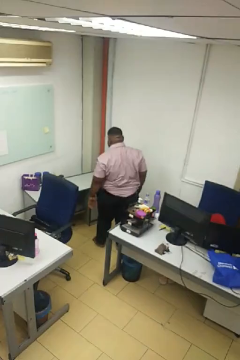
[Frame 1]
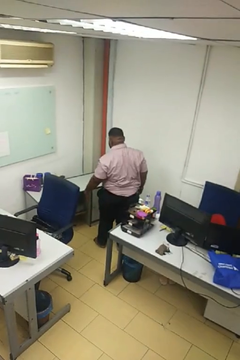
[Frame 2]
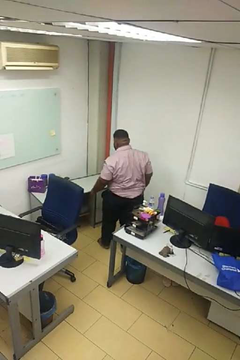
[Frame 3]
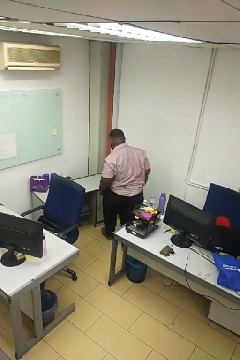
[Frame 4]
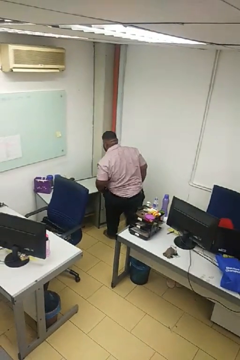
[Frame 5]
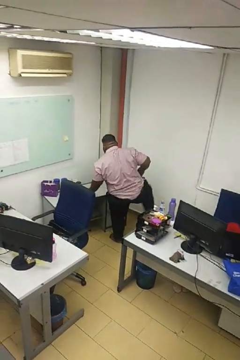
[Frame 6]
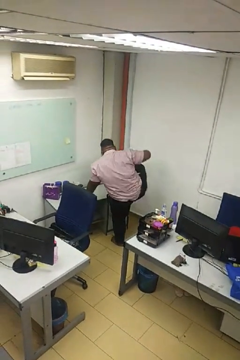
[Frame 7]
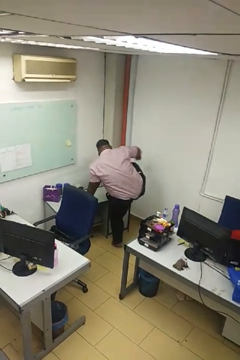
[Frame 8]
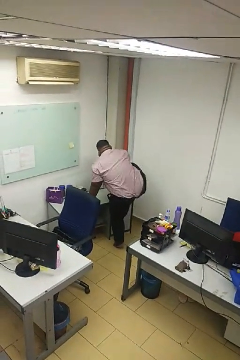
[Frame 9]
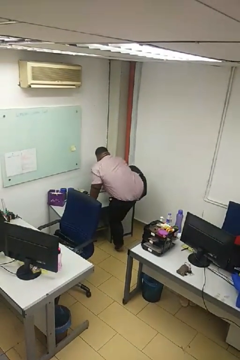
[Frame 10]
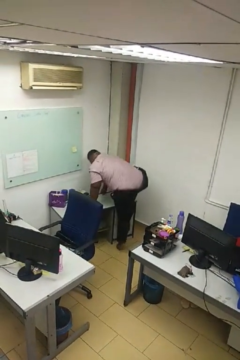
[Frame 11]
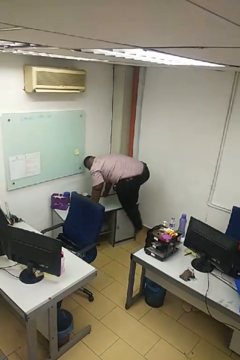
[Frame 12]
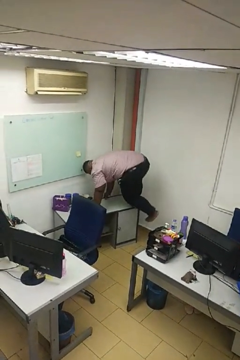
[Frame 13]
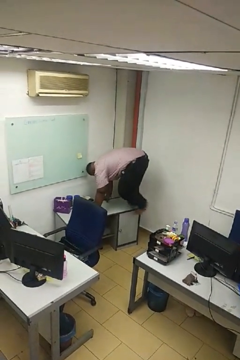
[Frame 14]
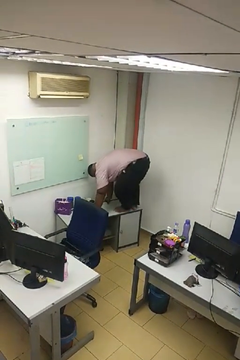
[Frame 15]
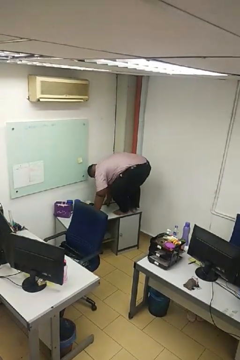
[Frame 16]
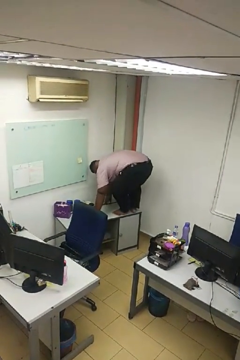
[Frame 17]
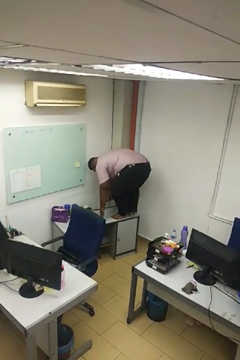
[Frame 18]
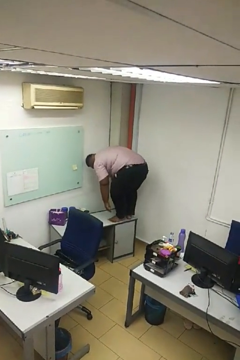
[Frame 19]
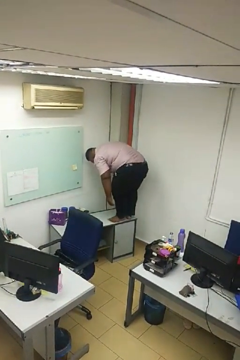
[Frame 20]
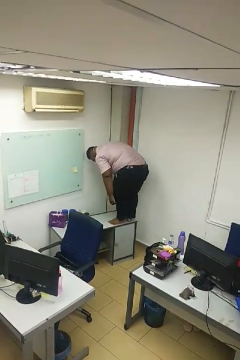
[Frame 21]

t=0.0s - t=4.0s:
person climbs on table

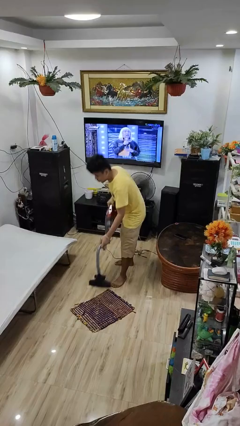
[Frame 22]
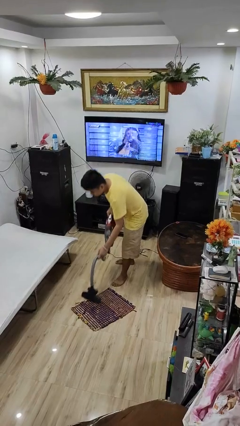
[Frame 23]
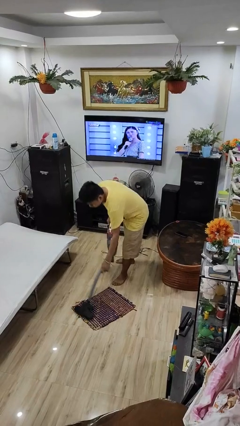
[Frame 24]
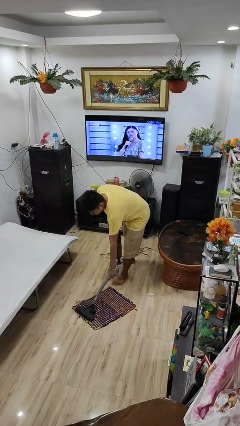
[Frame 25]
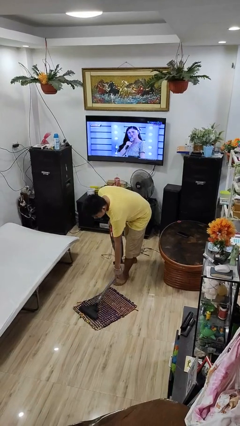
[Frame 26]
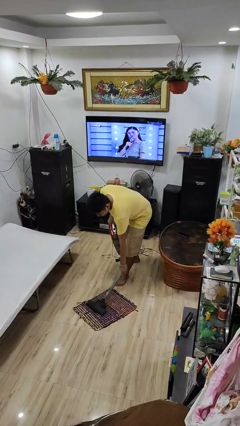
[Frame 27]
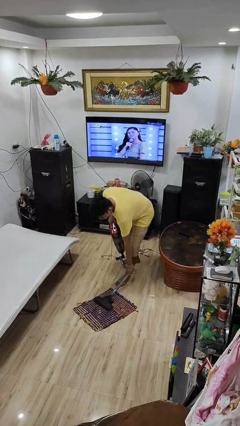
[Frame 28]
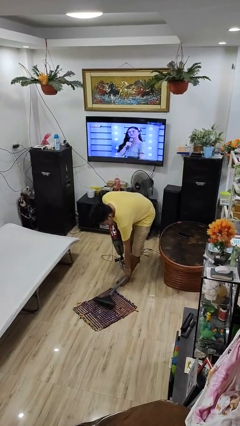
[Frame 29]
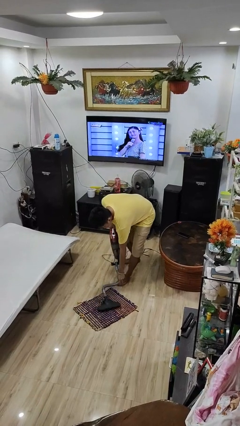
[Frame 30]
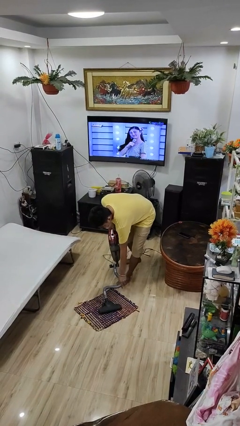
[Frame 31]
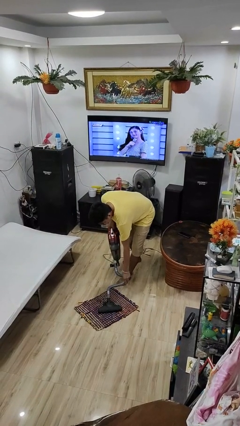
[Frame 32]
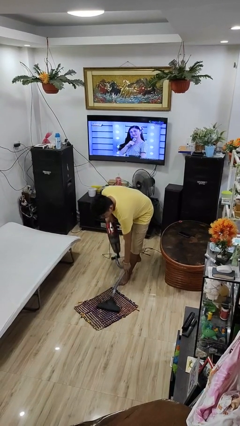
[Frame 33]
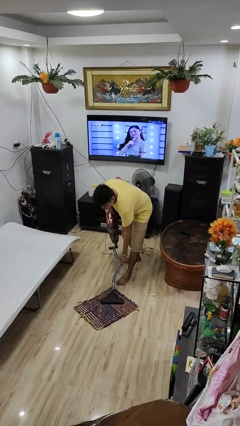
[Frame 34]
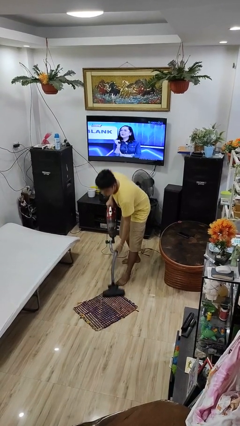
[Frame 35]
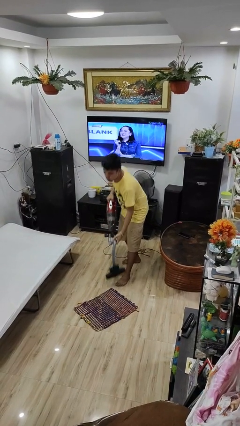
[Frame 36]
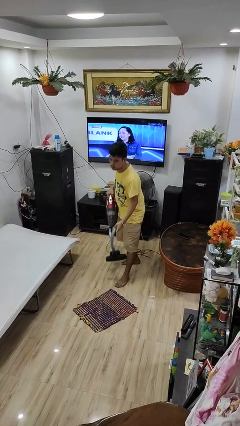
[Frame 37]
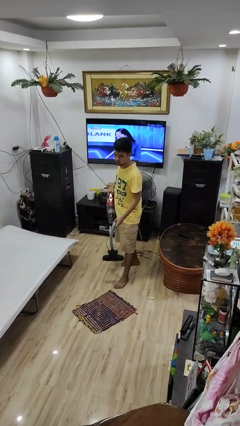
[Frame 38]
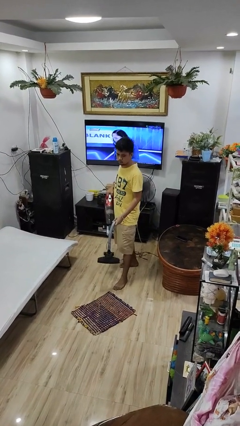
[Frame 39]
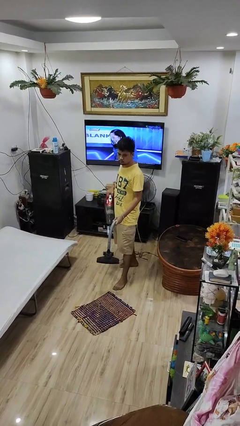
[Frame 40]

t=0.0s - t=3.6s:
person vacuums carpet

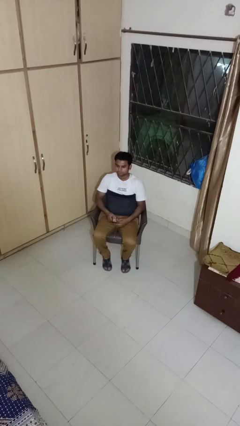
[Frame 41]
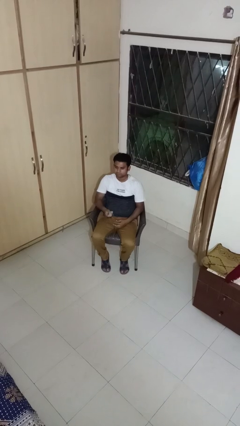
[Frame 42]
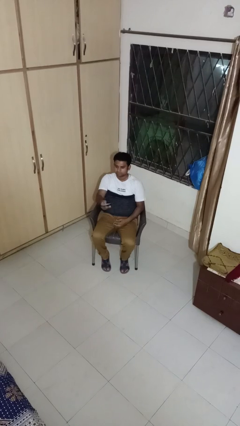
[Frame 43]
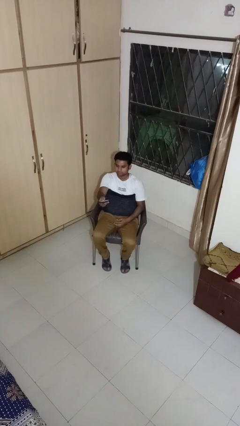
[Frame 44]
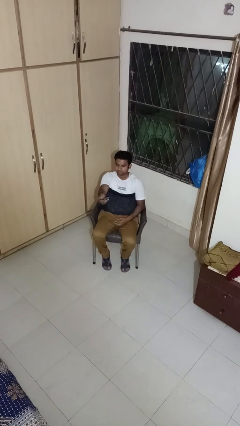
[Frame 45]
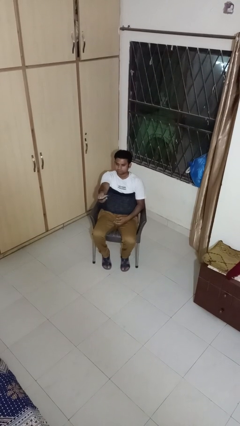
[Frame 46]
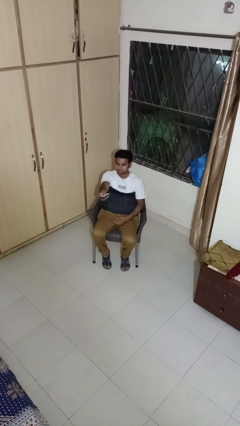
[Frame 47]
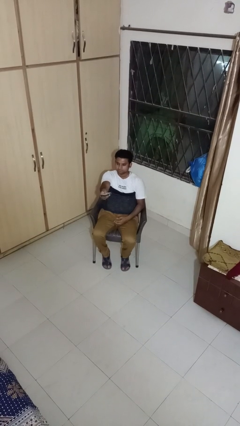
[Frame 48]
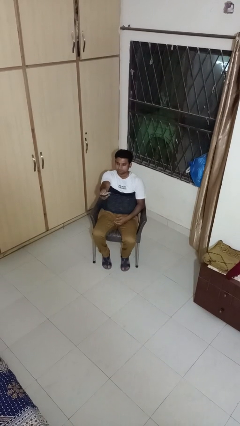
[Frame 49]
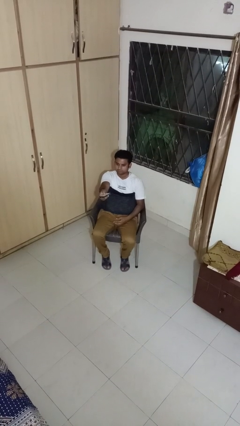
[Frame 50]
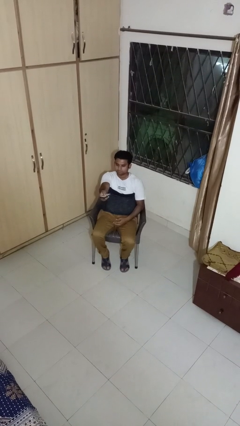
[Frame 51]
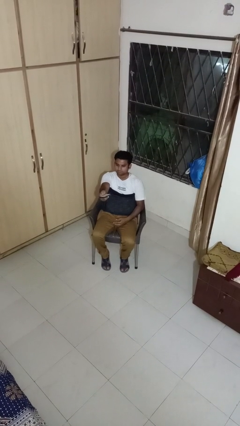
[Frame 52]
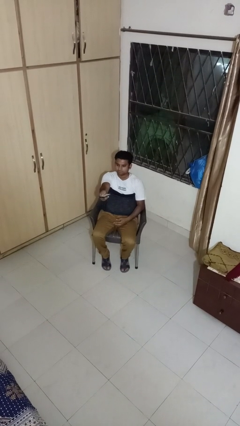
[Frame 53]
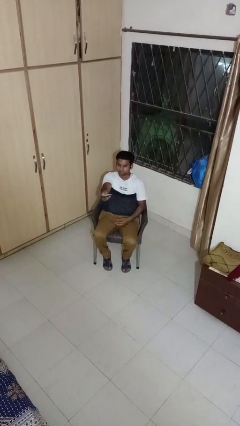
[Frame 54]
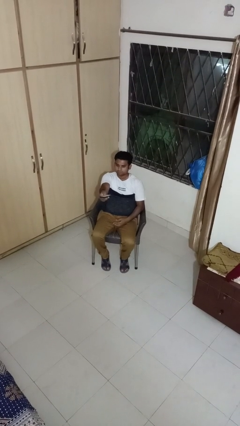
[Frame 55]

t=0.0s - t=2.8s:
person uses television remote

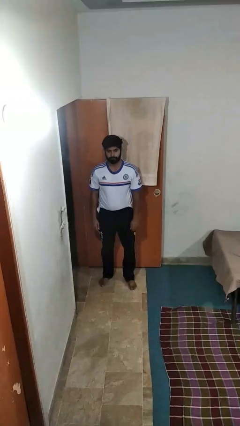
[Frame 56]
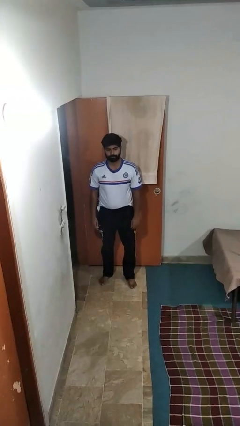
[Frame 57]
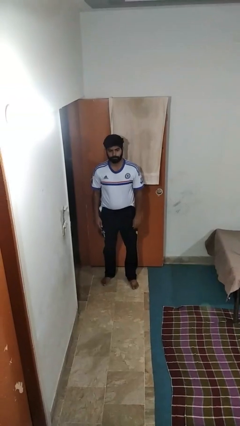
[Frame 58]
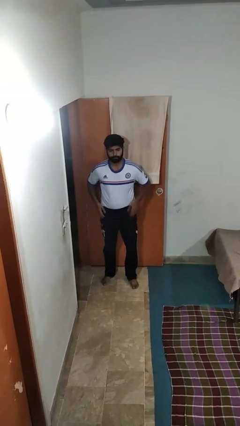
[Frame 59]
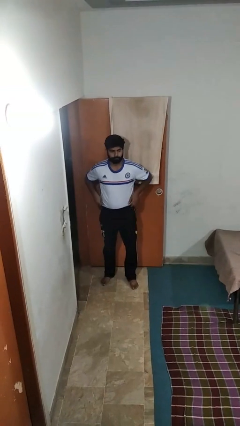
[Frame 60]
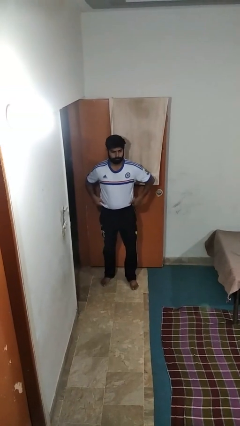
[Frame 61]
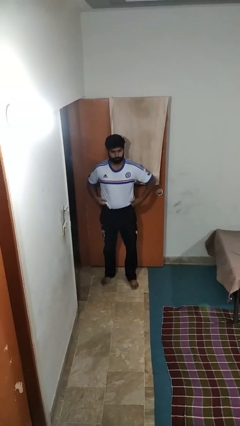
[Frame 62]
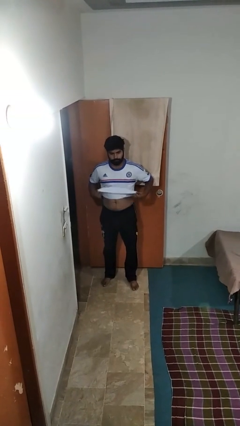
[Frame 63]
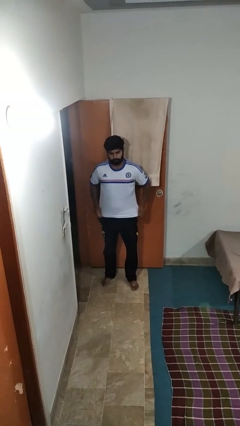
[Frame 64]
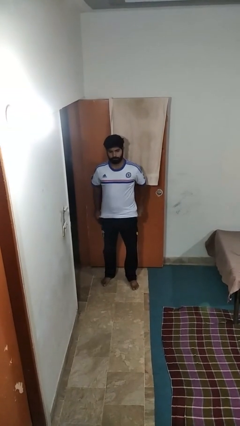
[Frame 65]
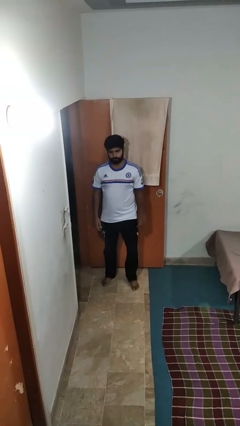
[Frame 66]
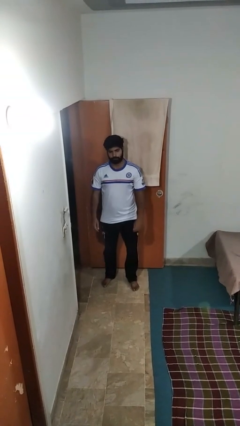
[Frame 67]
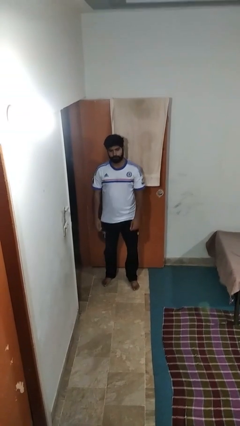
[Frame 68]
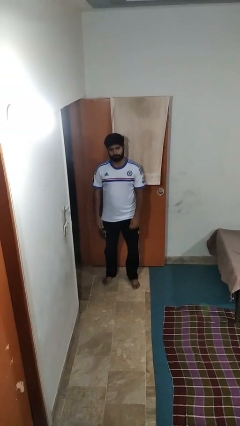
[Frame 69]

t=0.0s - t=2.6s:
person untucks shirt

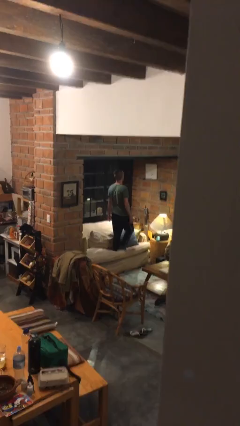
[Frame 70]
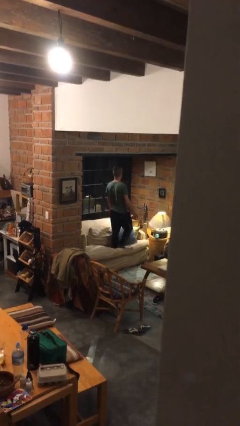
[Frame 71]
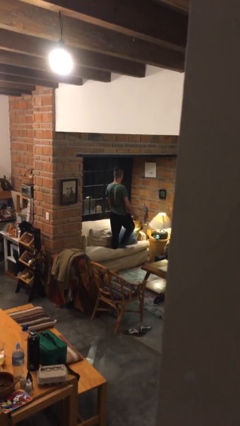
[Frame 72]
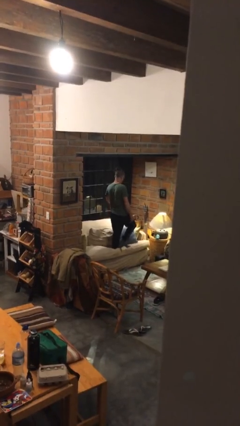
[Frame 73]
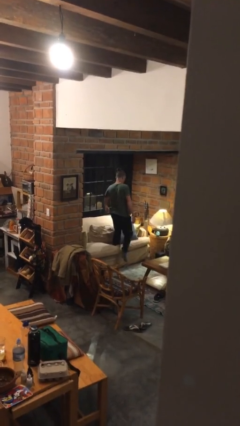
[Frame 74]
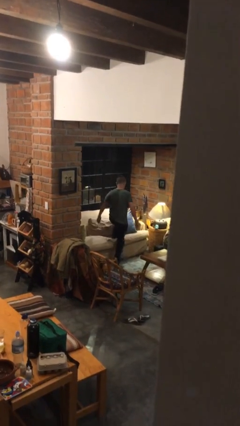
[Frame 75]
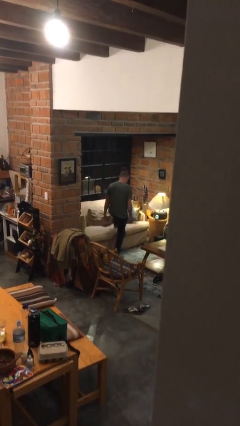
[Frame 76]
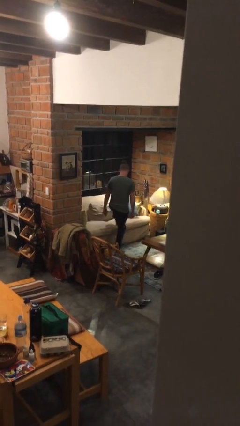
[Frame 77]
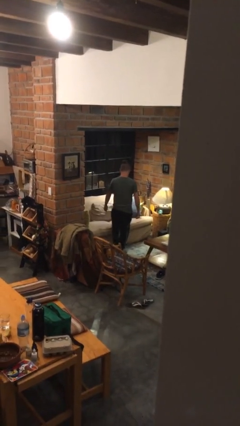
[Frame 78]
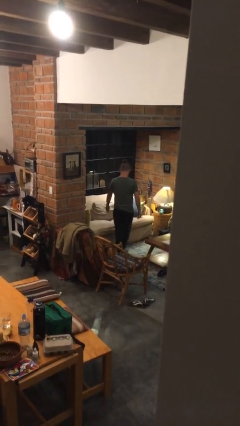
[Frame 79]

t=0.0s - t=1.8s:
person climbs off couch

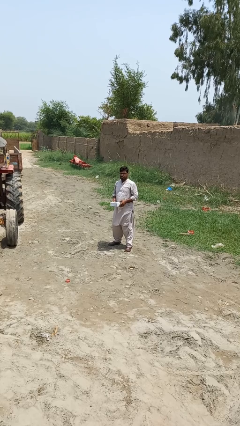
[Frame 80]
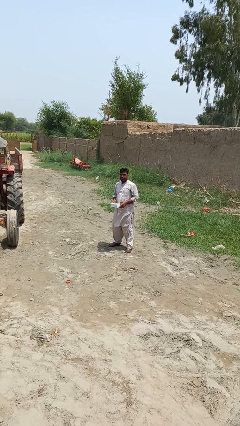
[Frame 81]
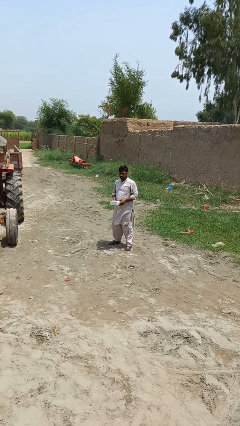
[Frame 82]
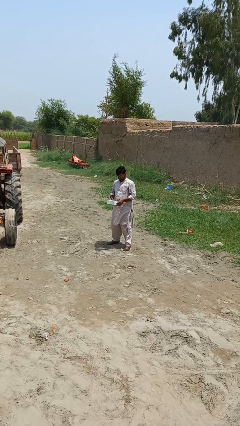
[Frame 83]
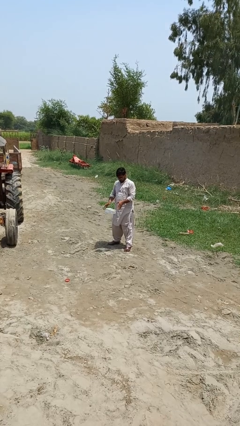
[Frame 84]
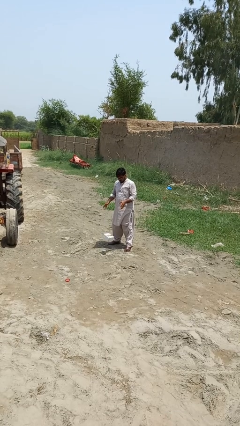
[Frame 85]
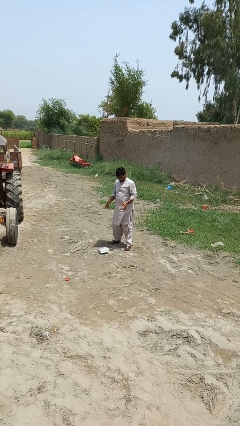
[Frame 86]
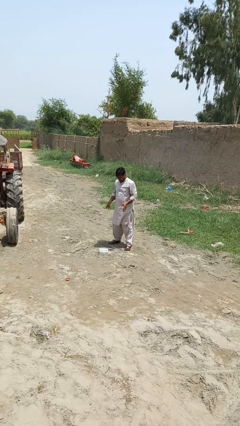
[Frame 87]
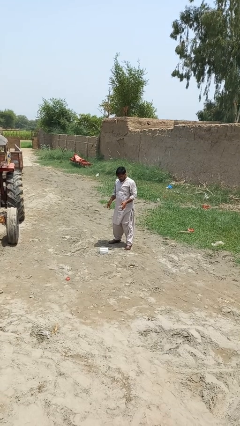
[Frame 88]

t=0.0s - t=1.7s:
person drops object

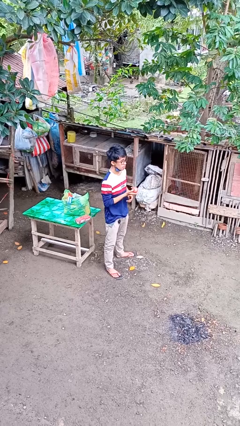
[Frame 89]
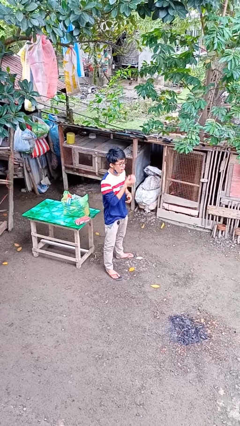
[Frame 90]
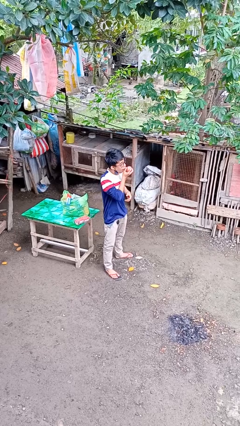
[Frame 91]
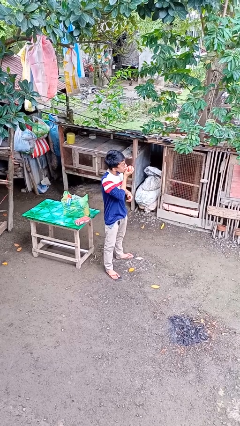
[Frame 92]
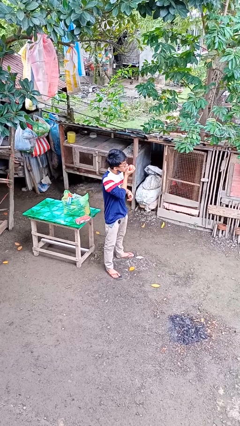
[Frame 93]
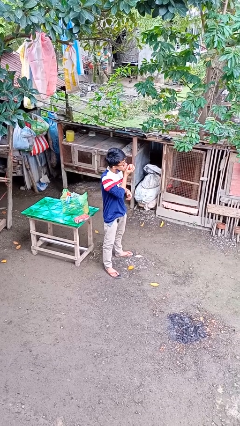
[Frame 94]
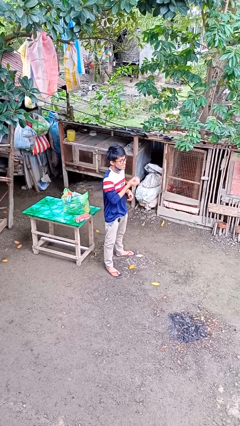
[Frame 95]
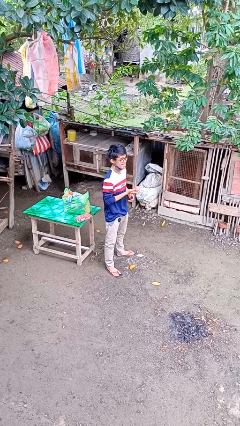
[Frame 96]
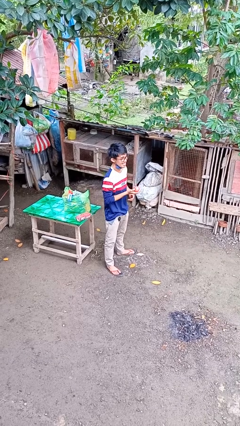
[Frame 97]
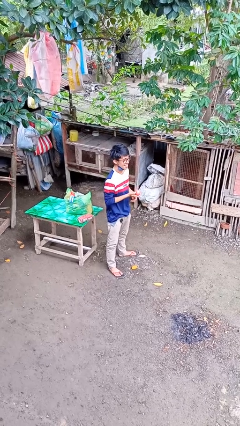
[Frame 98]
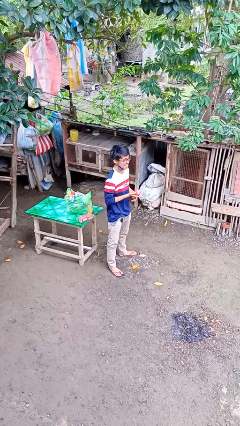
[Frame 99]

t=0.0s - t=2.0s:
person eats apple
